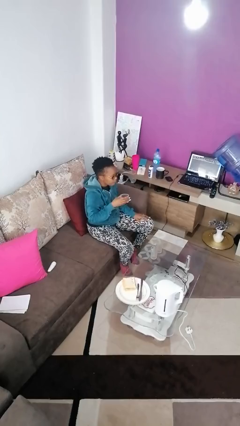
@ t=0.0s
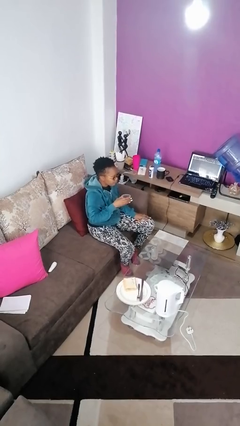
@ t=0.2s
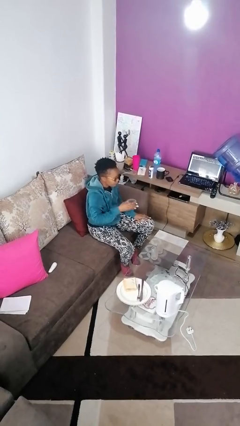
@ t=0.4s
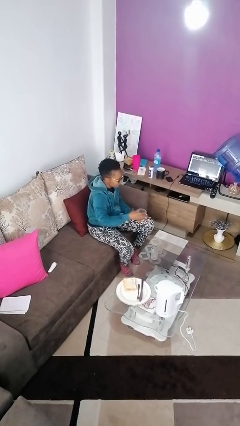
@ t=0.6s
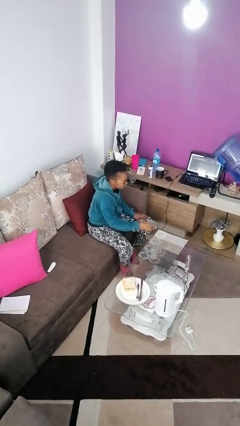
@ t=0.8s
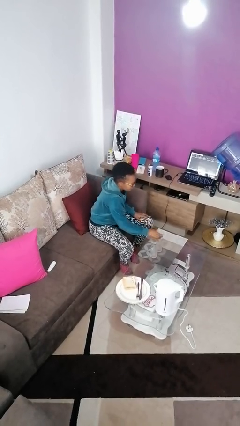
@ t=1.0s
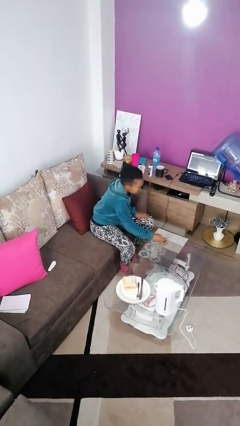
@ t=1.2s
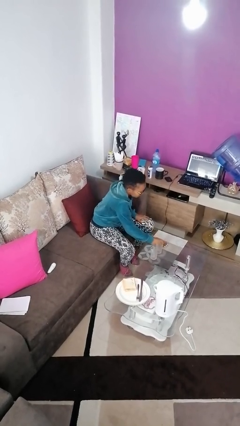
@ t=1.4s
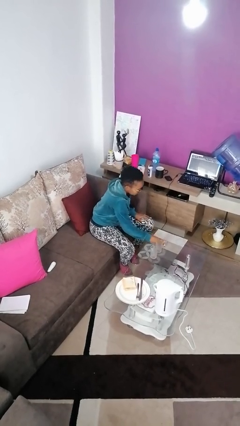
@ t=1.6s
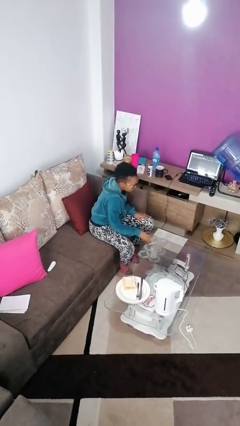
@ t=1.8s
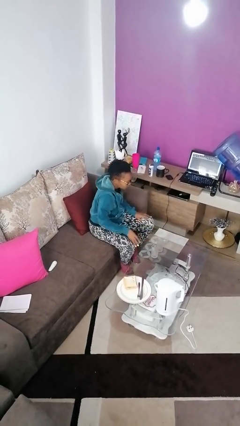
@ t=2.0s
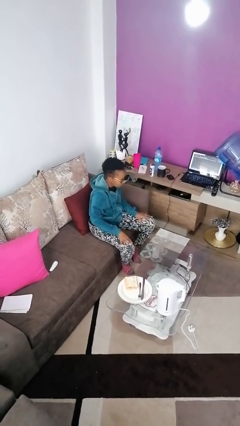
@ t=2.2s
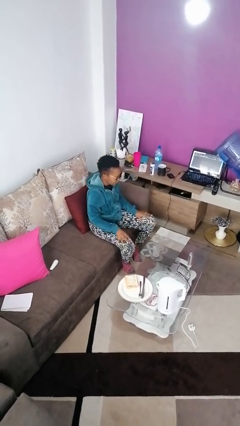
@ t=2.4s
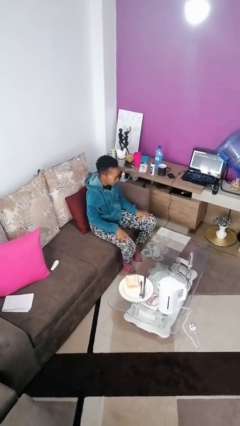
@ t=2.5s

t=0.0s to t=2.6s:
person puts down object on table

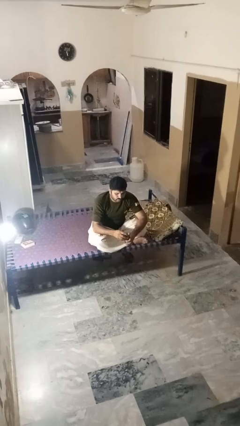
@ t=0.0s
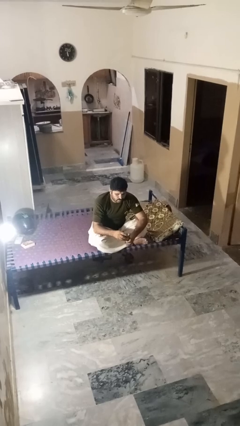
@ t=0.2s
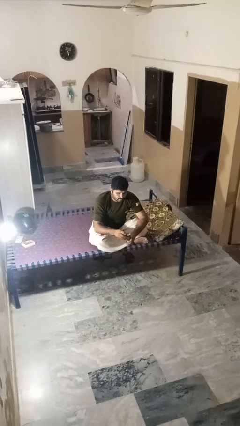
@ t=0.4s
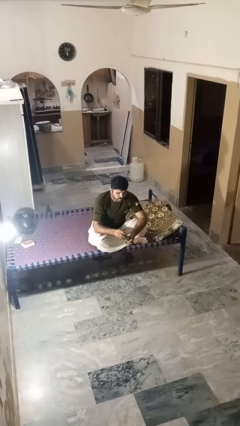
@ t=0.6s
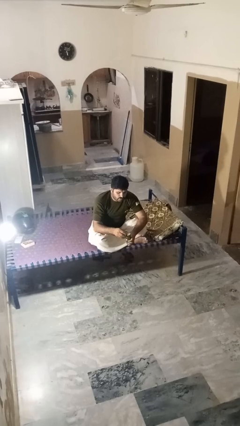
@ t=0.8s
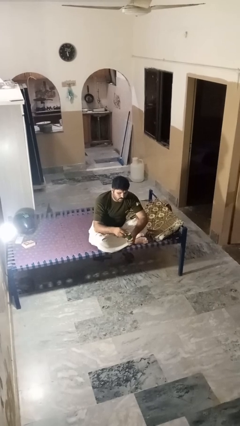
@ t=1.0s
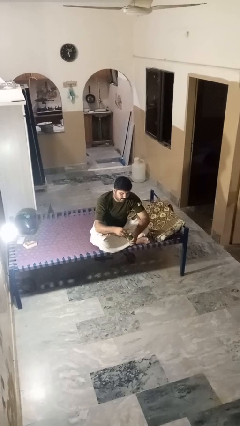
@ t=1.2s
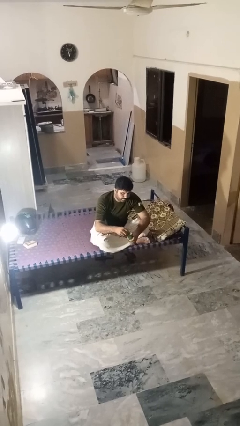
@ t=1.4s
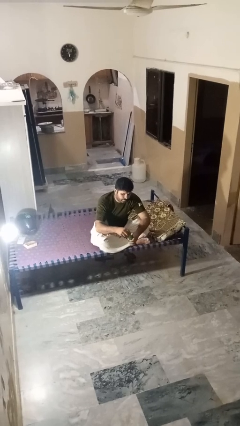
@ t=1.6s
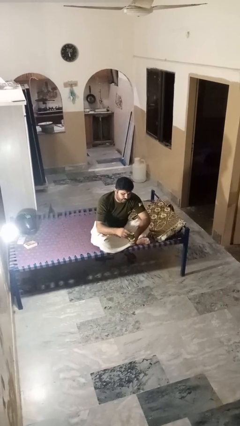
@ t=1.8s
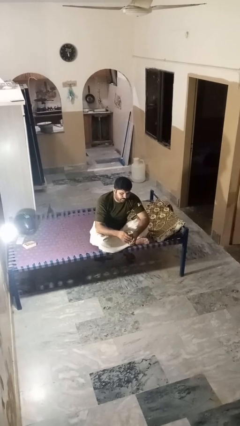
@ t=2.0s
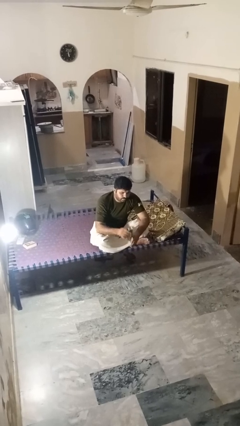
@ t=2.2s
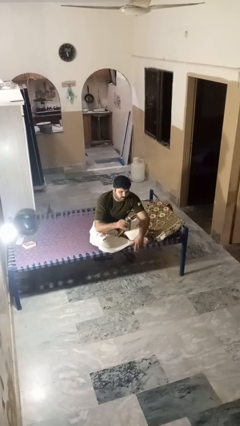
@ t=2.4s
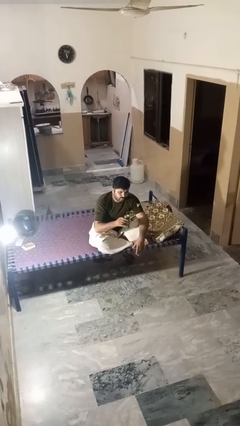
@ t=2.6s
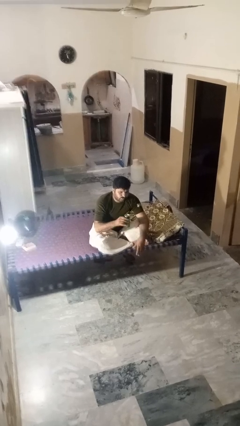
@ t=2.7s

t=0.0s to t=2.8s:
person opens beverage can

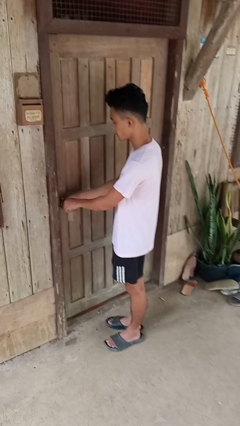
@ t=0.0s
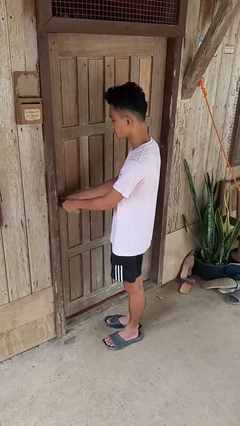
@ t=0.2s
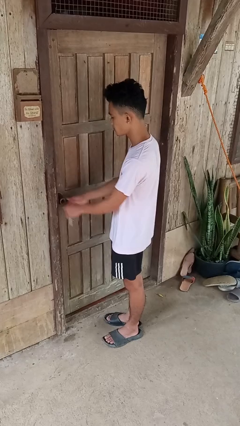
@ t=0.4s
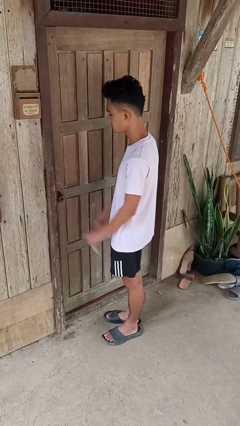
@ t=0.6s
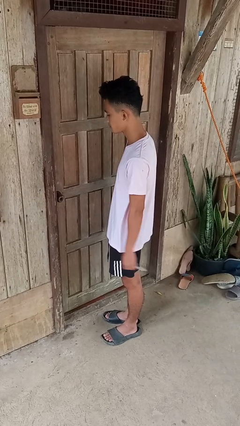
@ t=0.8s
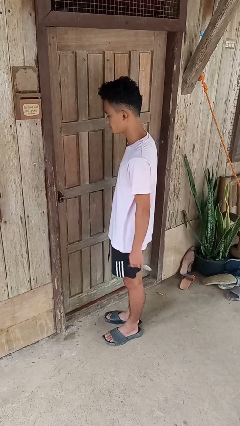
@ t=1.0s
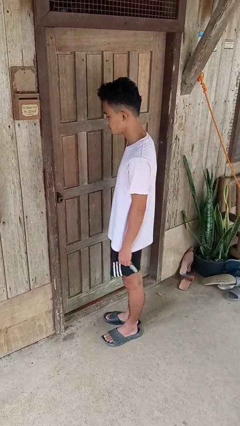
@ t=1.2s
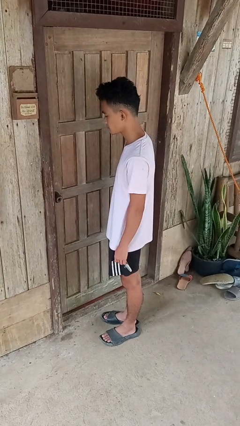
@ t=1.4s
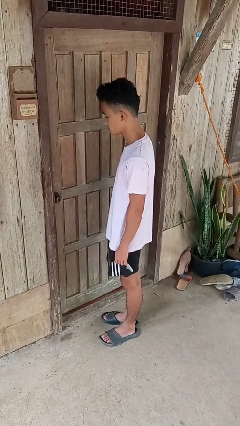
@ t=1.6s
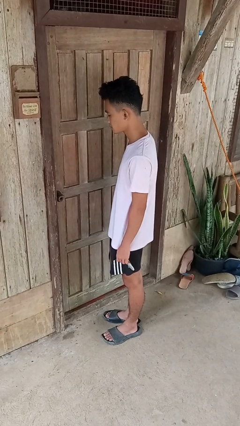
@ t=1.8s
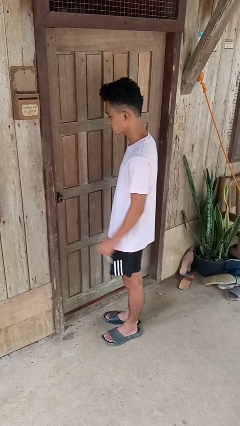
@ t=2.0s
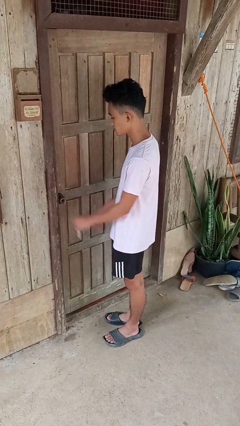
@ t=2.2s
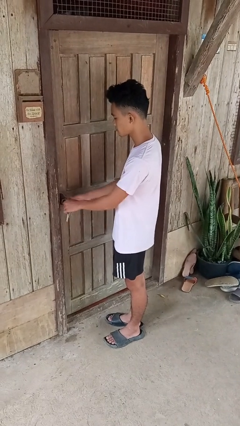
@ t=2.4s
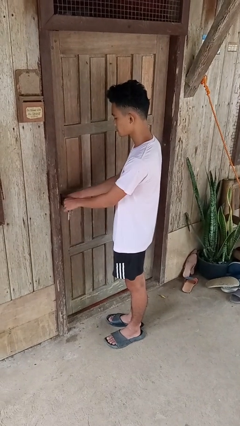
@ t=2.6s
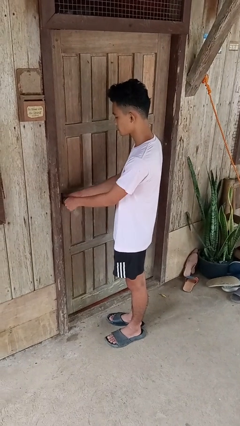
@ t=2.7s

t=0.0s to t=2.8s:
person locks door with keys

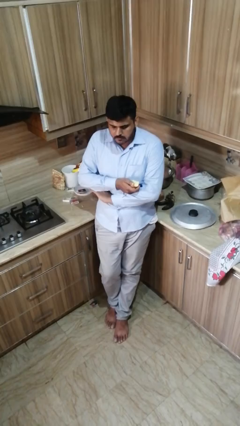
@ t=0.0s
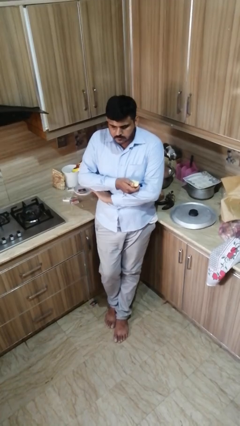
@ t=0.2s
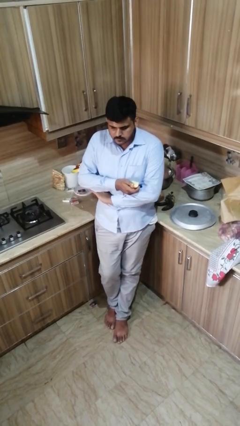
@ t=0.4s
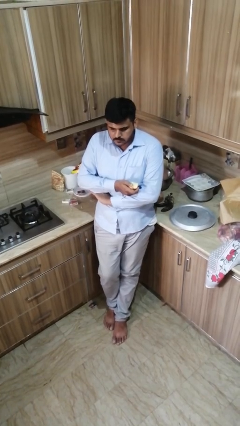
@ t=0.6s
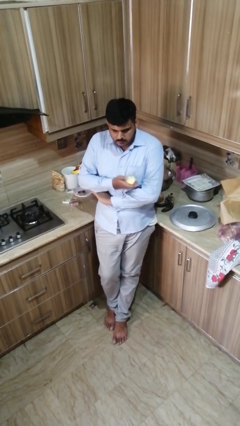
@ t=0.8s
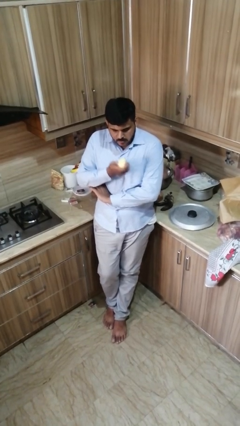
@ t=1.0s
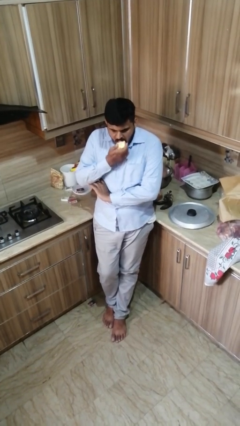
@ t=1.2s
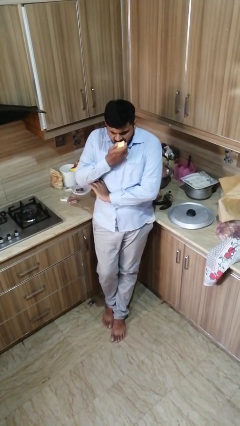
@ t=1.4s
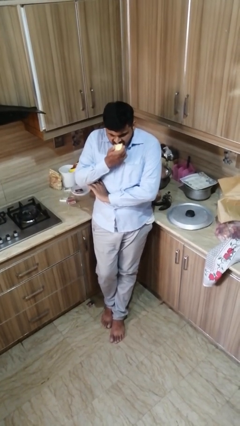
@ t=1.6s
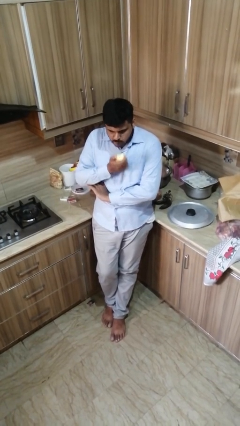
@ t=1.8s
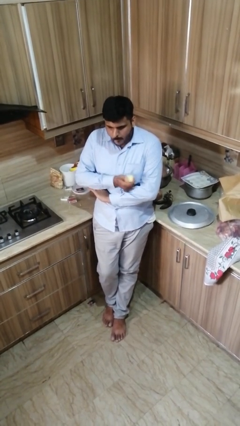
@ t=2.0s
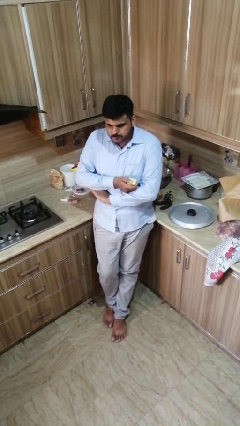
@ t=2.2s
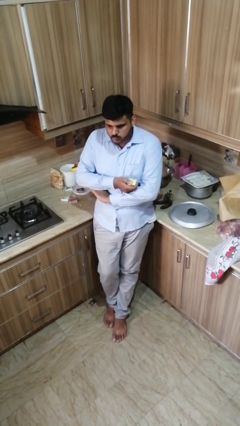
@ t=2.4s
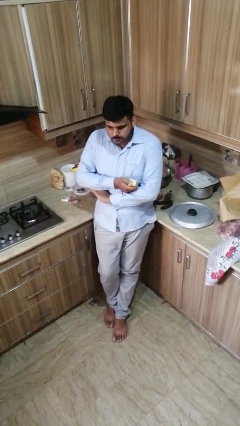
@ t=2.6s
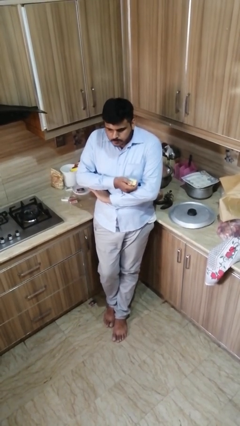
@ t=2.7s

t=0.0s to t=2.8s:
person eats apple

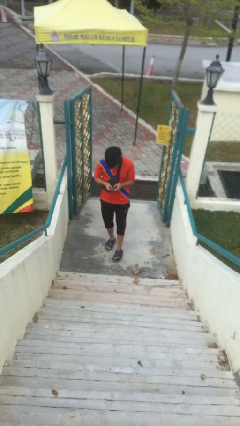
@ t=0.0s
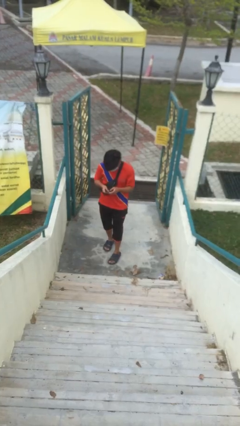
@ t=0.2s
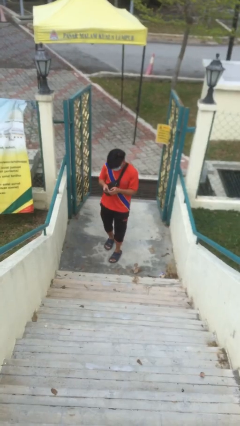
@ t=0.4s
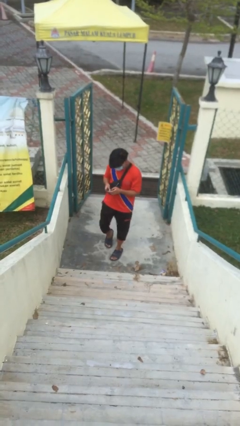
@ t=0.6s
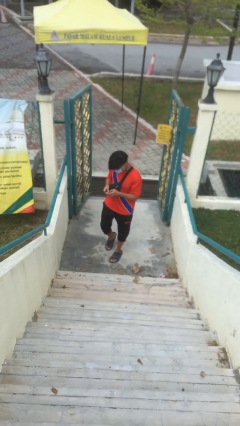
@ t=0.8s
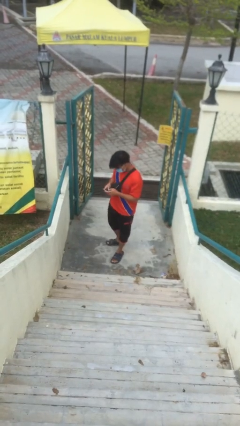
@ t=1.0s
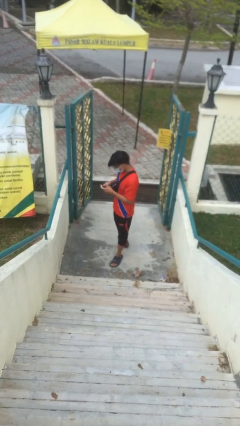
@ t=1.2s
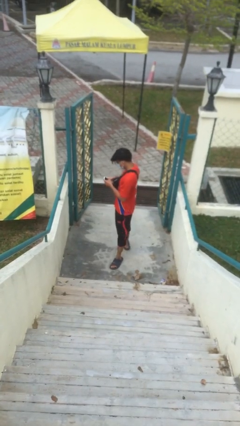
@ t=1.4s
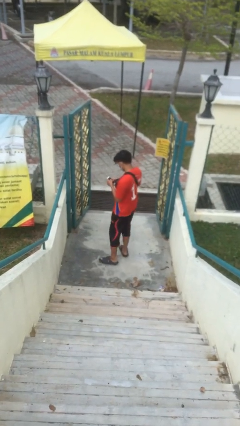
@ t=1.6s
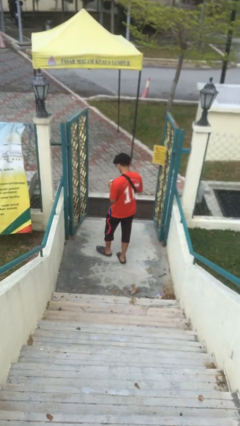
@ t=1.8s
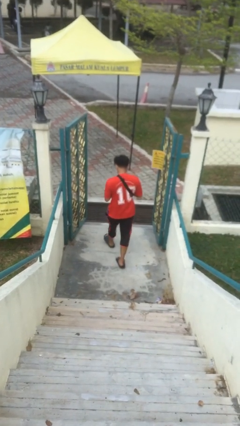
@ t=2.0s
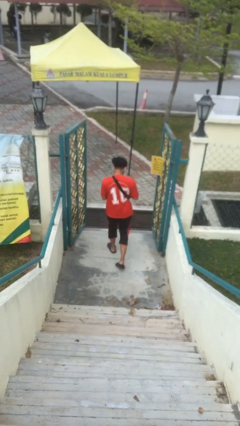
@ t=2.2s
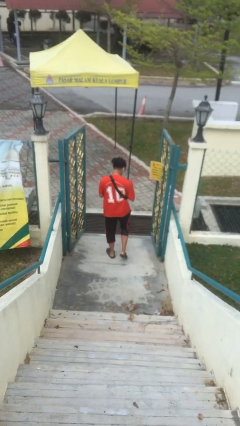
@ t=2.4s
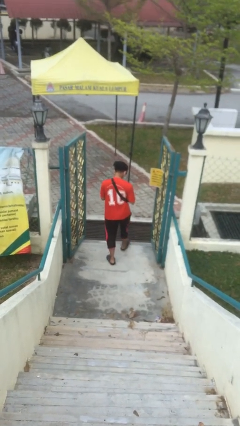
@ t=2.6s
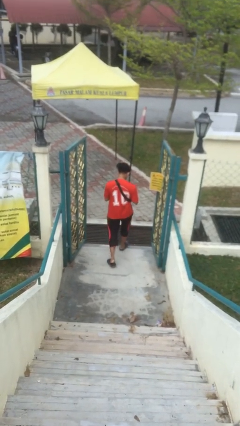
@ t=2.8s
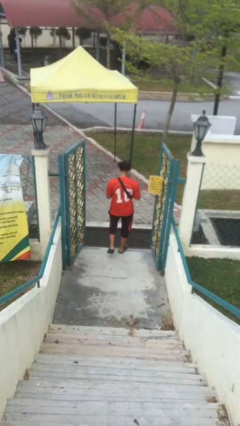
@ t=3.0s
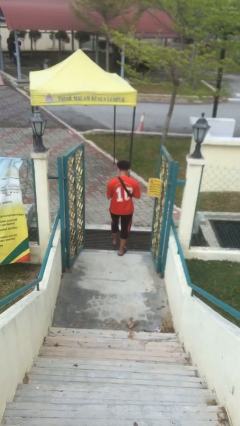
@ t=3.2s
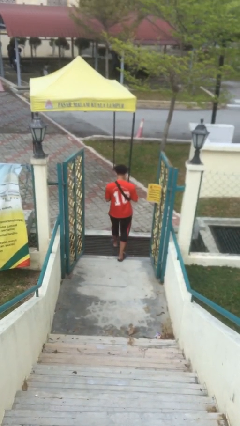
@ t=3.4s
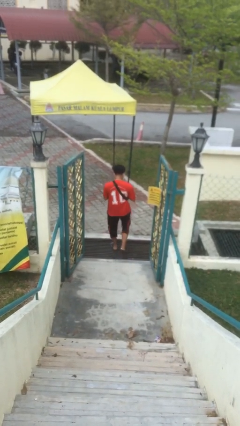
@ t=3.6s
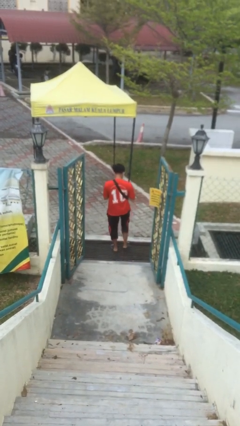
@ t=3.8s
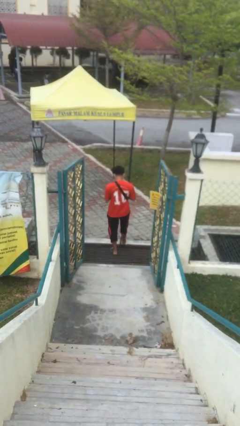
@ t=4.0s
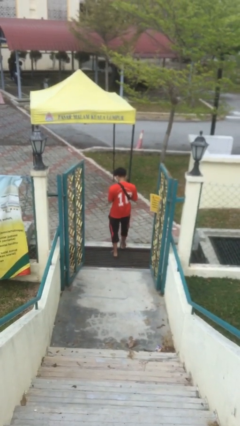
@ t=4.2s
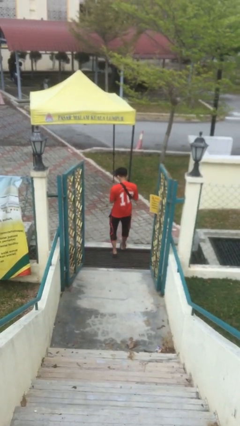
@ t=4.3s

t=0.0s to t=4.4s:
person exits scene through structure

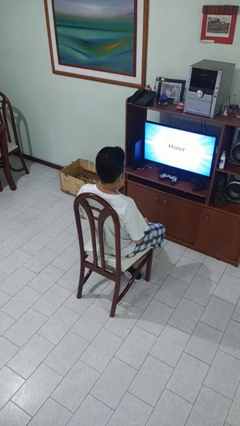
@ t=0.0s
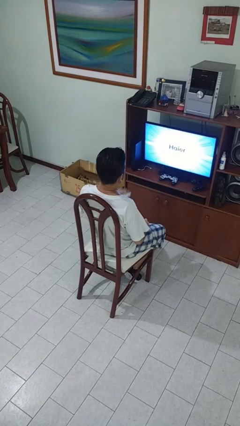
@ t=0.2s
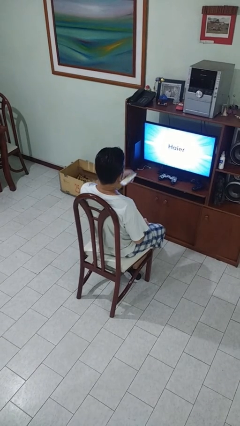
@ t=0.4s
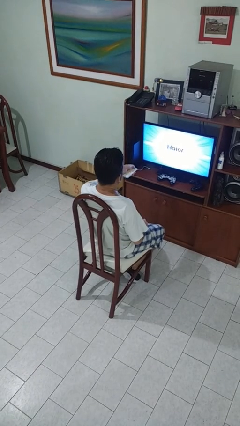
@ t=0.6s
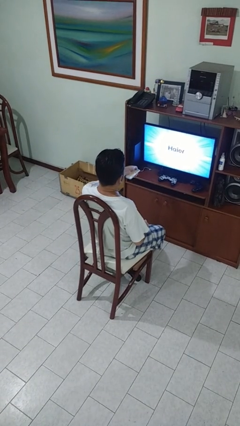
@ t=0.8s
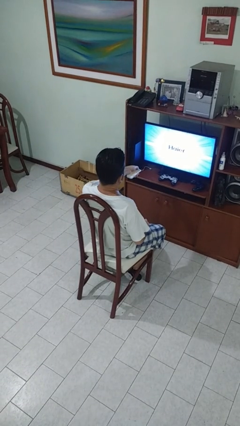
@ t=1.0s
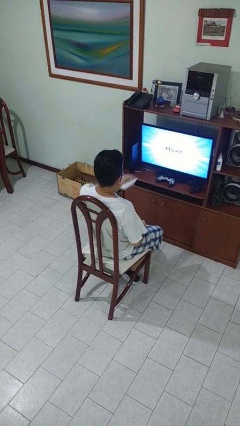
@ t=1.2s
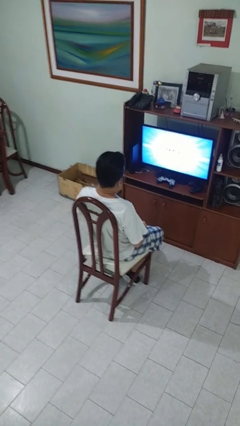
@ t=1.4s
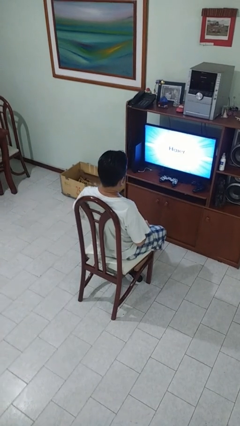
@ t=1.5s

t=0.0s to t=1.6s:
person uses television remote

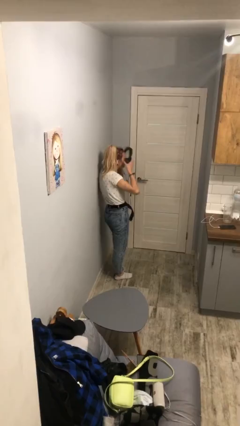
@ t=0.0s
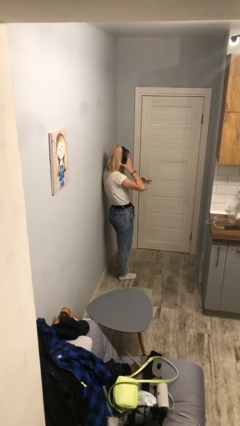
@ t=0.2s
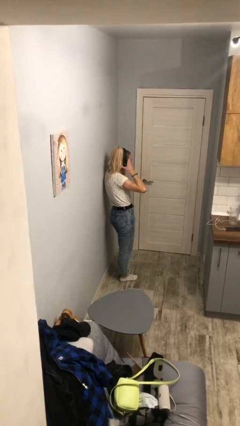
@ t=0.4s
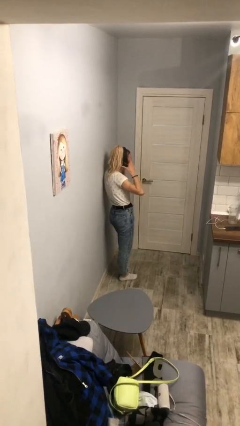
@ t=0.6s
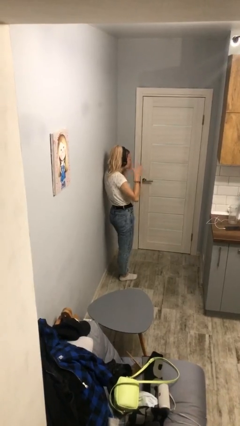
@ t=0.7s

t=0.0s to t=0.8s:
person puts on headphones
